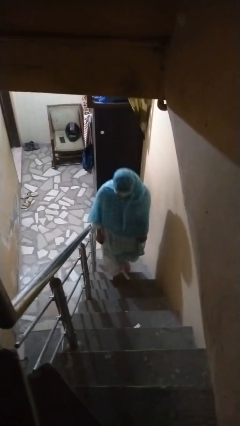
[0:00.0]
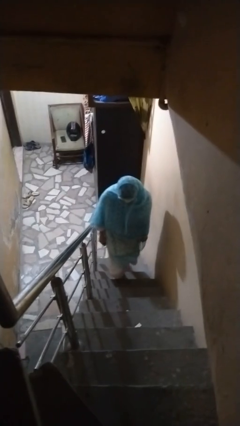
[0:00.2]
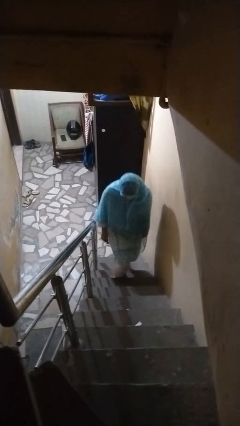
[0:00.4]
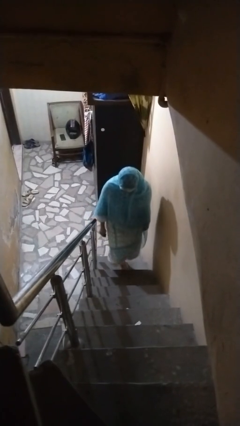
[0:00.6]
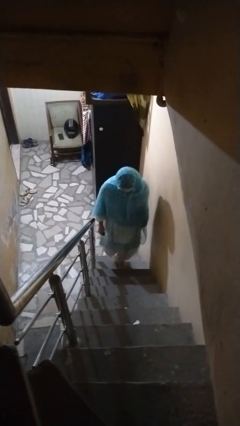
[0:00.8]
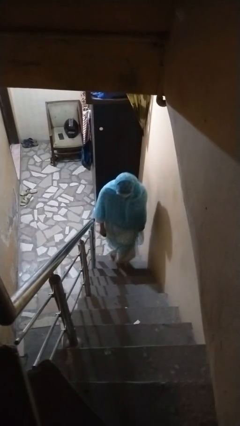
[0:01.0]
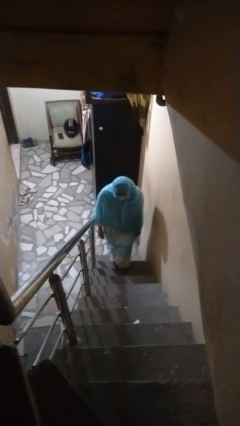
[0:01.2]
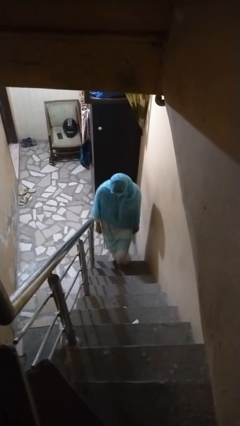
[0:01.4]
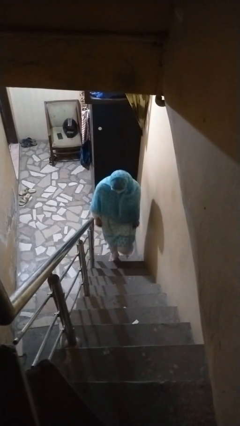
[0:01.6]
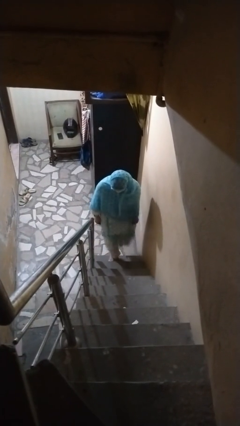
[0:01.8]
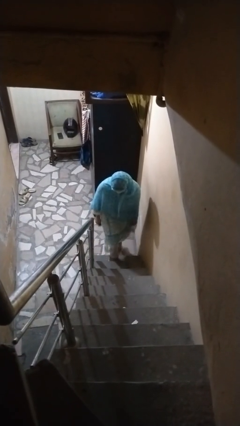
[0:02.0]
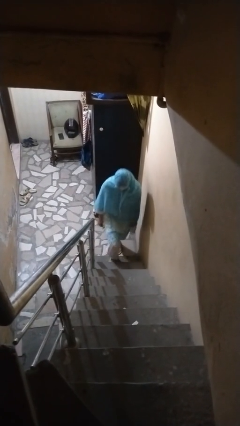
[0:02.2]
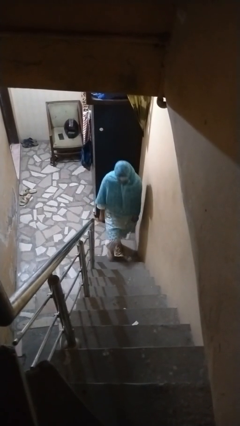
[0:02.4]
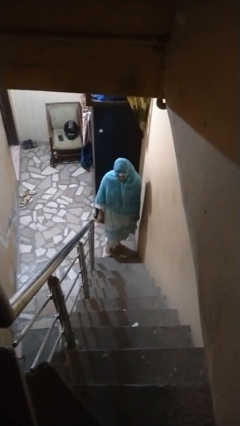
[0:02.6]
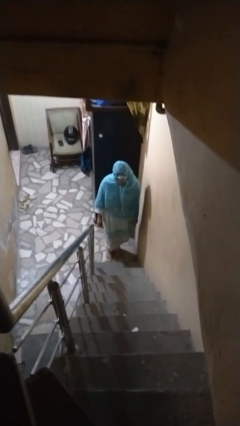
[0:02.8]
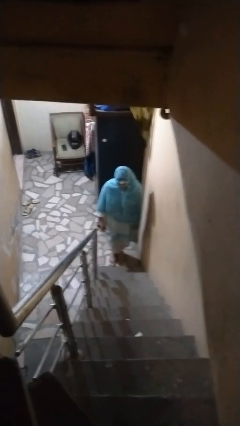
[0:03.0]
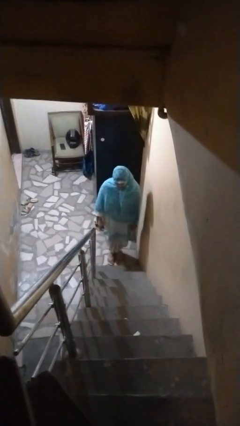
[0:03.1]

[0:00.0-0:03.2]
person climbs down stairs

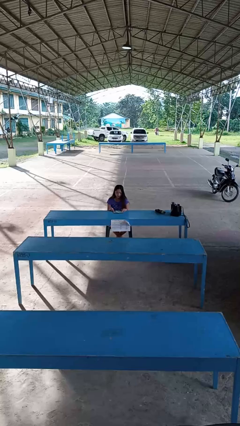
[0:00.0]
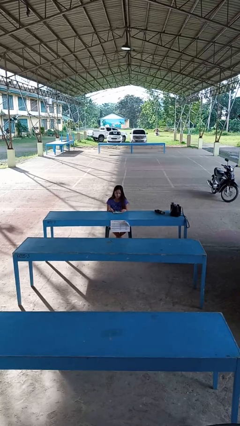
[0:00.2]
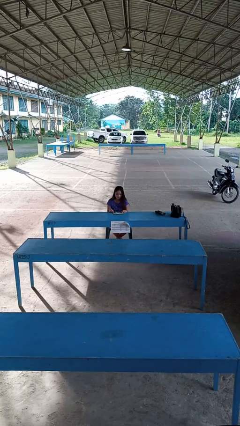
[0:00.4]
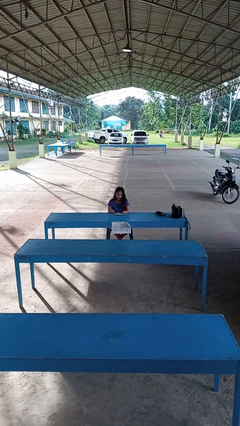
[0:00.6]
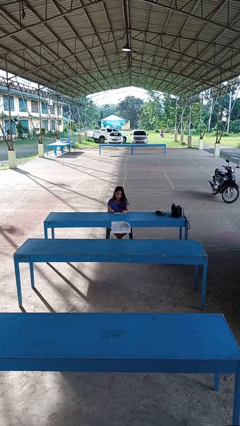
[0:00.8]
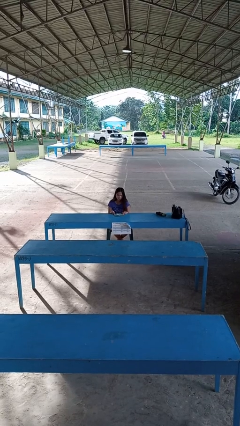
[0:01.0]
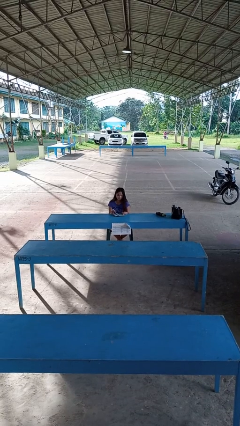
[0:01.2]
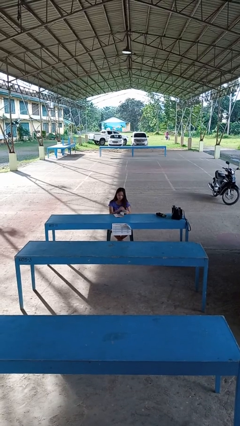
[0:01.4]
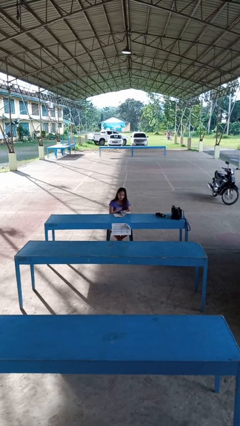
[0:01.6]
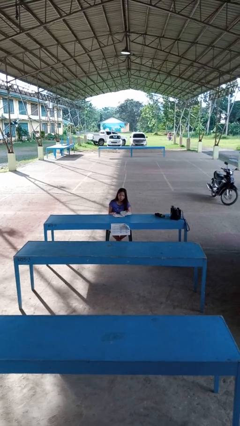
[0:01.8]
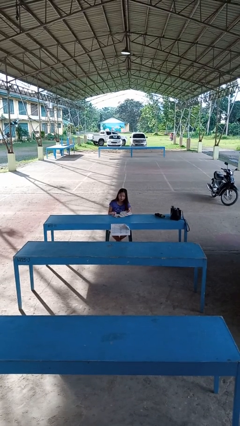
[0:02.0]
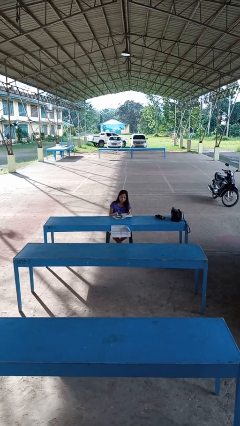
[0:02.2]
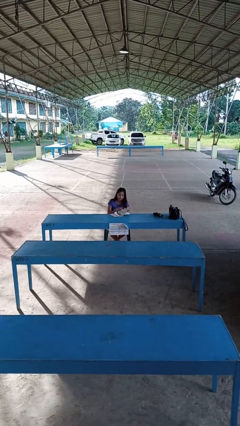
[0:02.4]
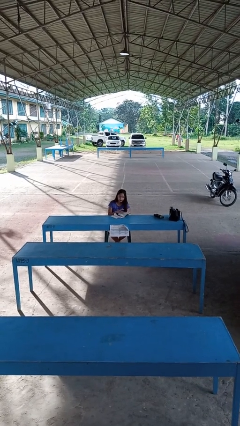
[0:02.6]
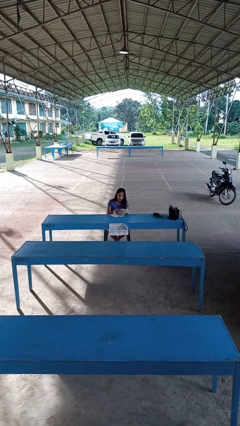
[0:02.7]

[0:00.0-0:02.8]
person reads magazine

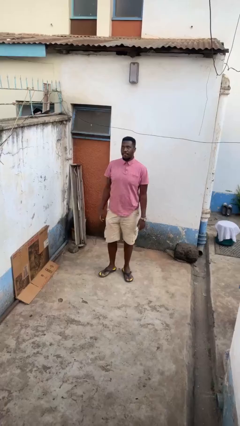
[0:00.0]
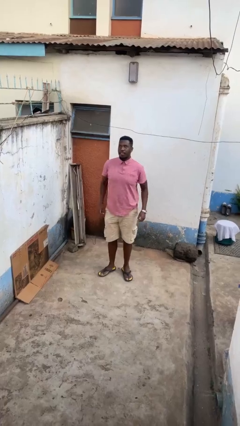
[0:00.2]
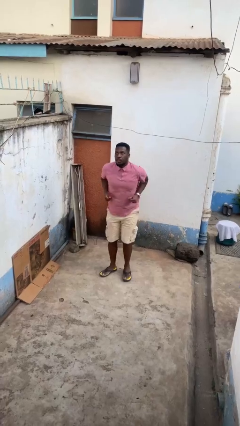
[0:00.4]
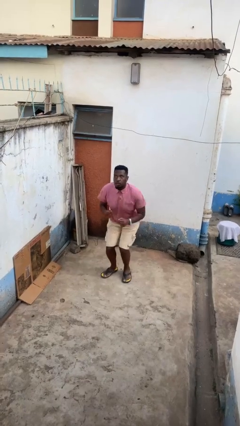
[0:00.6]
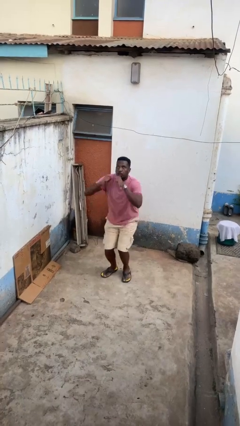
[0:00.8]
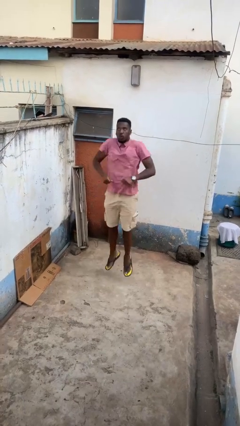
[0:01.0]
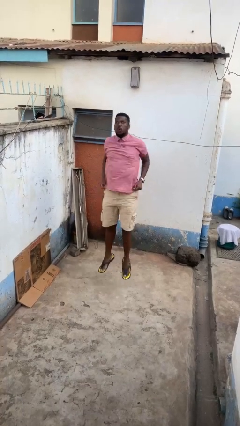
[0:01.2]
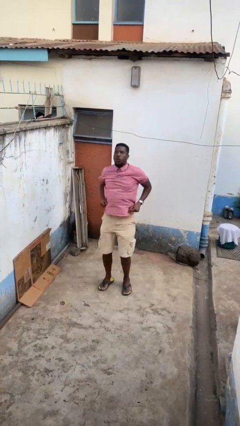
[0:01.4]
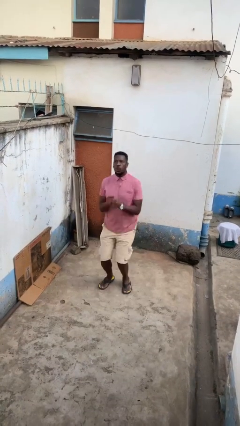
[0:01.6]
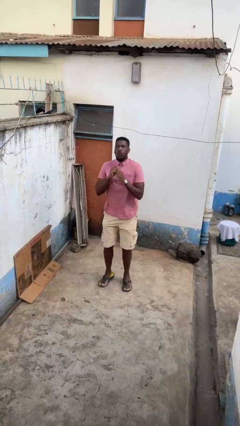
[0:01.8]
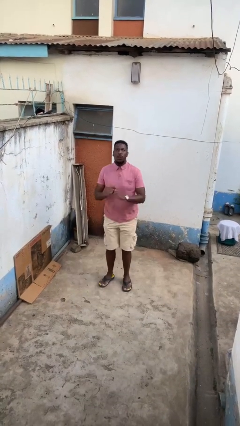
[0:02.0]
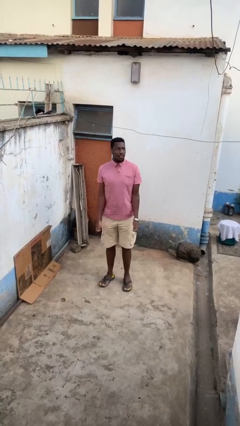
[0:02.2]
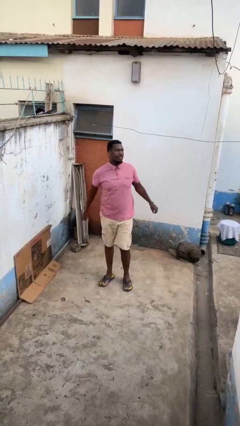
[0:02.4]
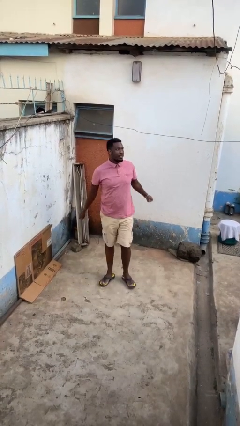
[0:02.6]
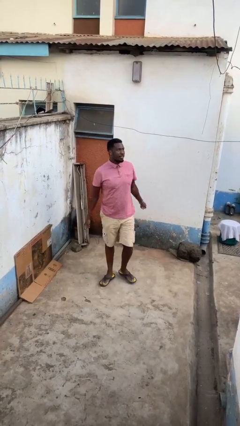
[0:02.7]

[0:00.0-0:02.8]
person jumps

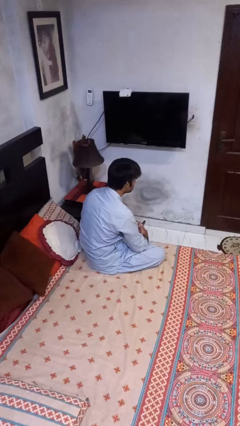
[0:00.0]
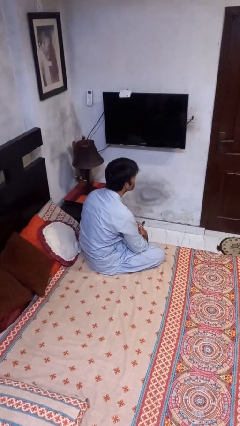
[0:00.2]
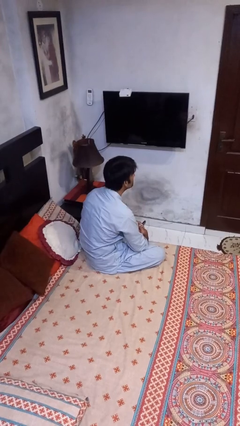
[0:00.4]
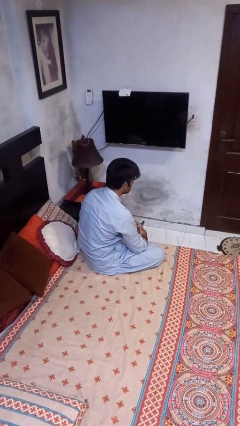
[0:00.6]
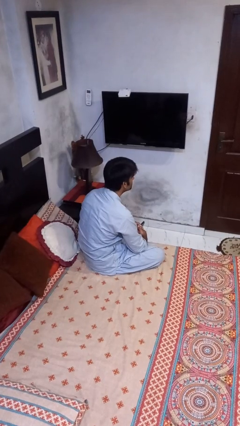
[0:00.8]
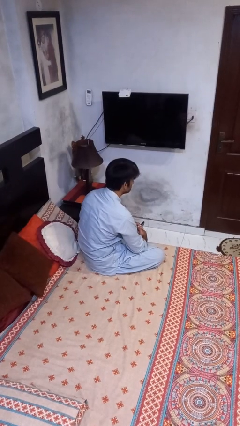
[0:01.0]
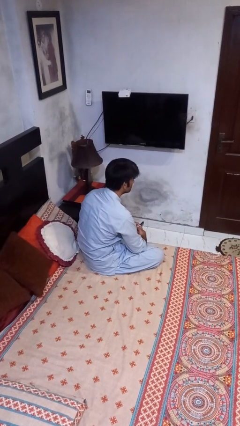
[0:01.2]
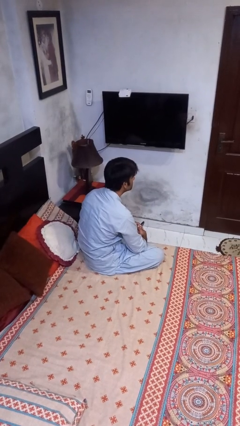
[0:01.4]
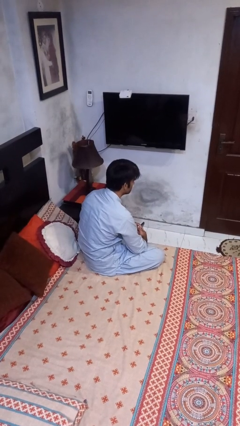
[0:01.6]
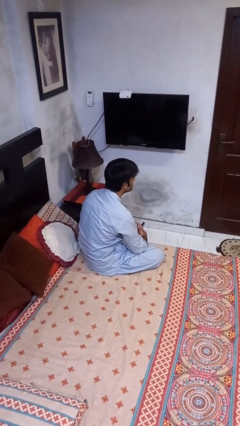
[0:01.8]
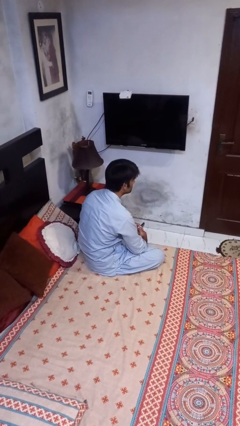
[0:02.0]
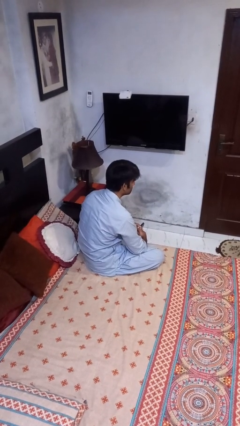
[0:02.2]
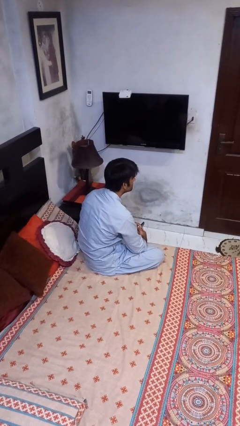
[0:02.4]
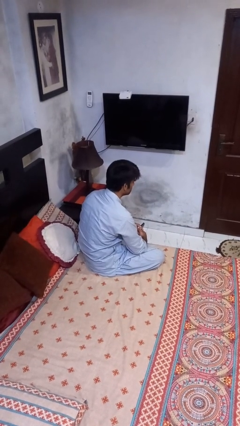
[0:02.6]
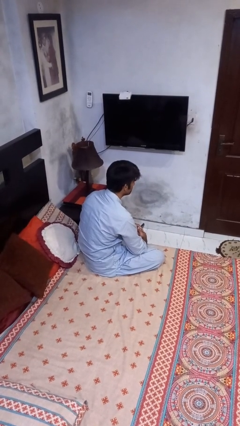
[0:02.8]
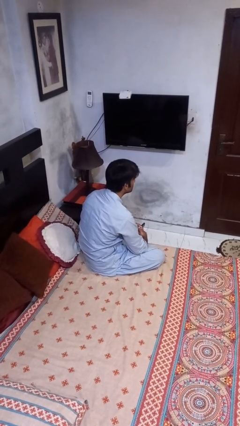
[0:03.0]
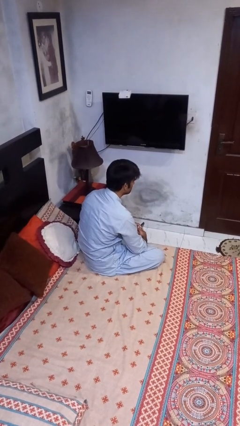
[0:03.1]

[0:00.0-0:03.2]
person nods head

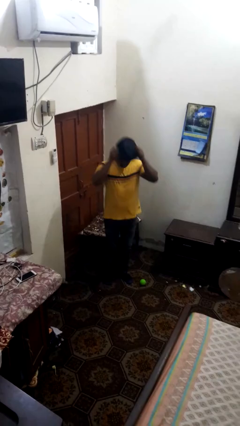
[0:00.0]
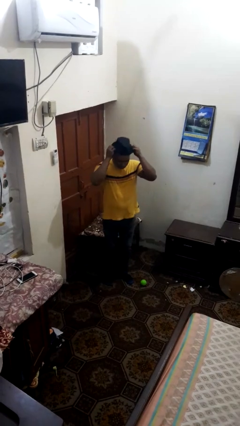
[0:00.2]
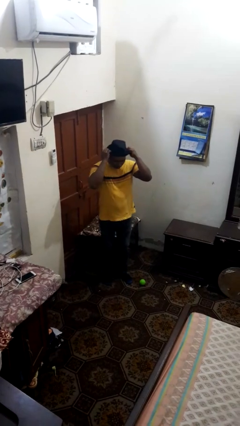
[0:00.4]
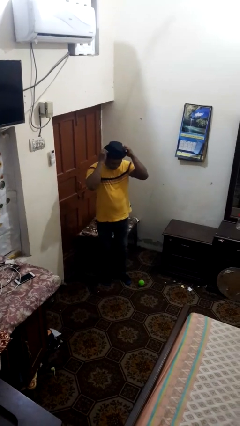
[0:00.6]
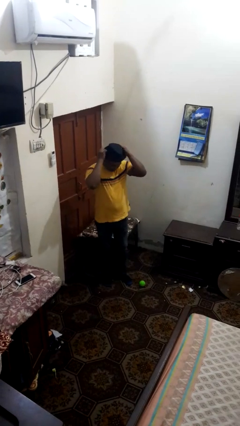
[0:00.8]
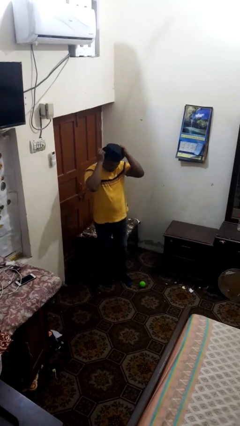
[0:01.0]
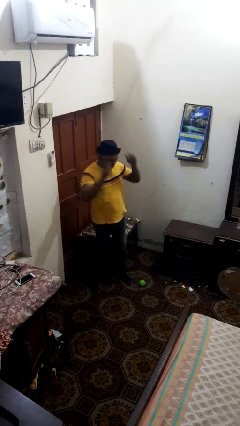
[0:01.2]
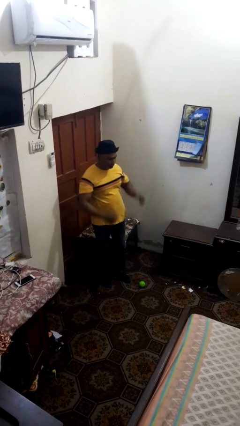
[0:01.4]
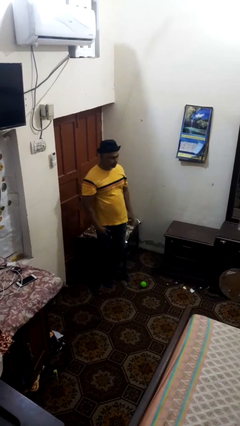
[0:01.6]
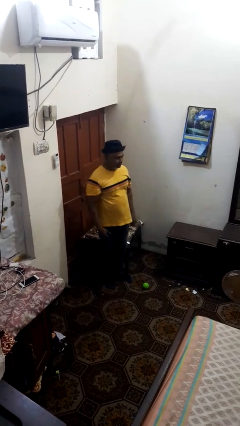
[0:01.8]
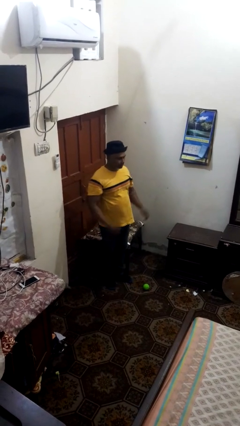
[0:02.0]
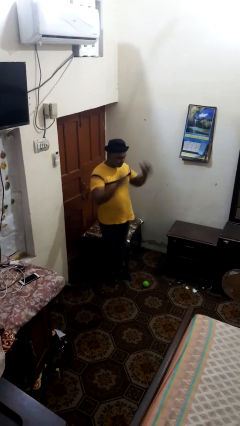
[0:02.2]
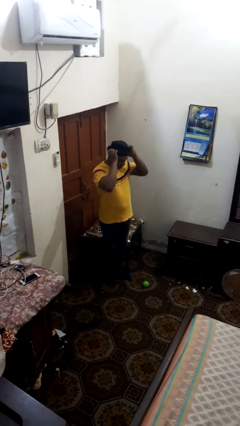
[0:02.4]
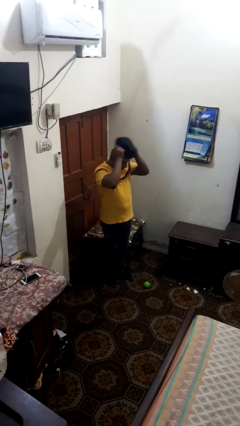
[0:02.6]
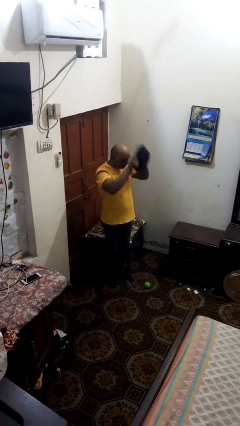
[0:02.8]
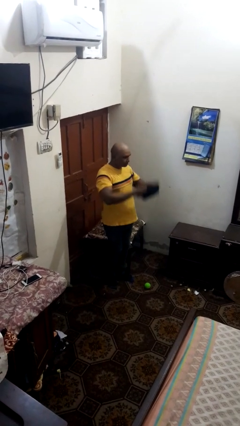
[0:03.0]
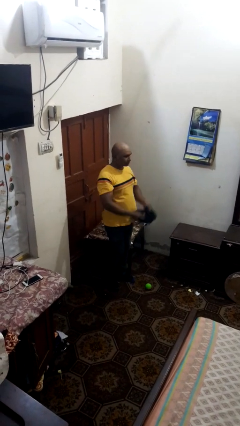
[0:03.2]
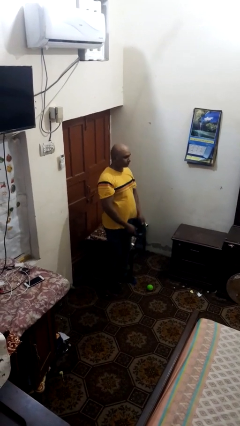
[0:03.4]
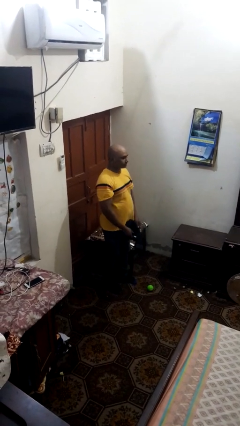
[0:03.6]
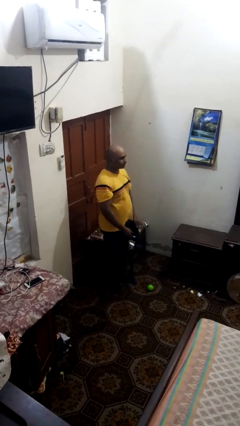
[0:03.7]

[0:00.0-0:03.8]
person puts on hat

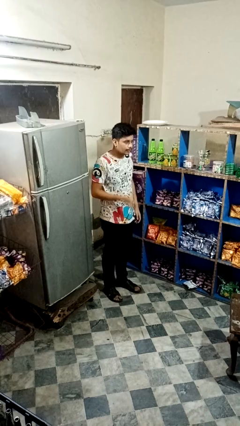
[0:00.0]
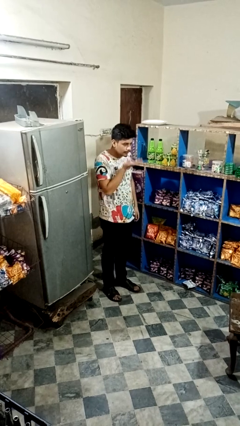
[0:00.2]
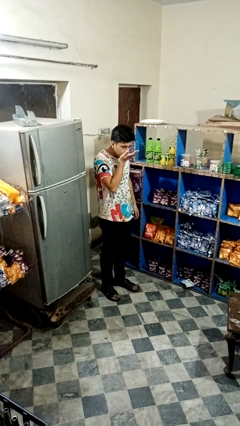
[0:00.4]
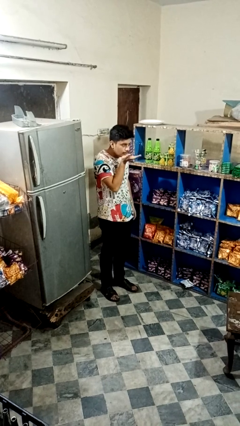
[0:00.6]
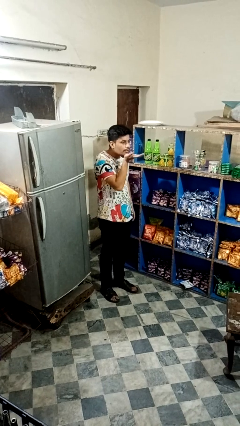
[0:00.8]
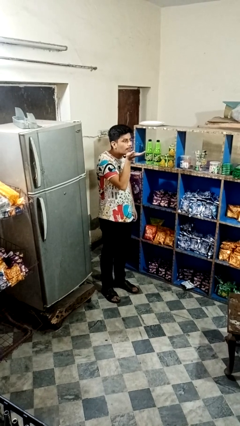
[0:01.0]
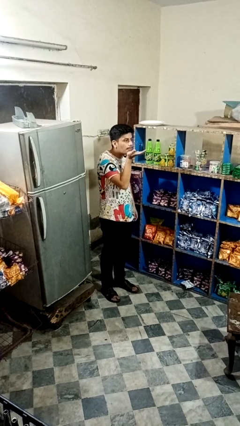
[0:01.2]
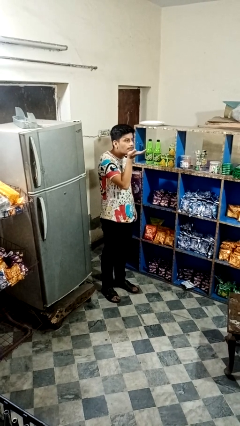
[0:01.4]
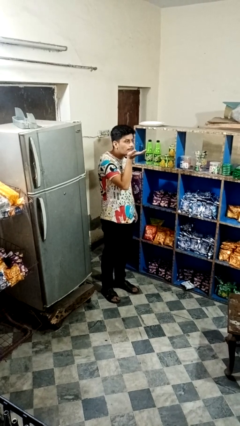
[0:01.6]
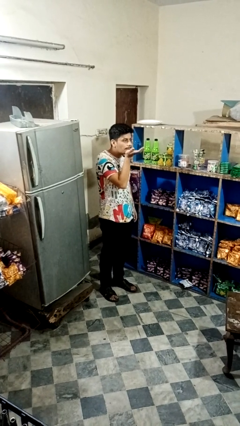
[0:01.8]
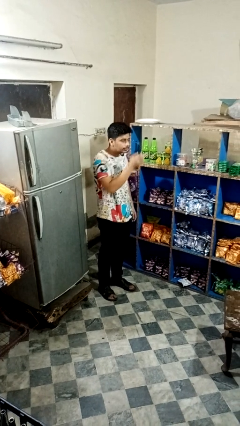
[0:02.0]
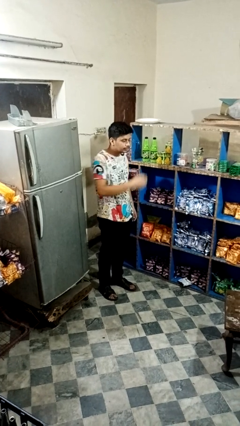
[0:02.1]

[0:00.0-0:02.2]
person gestures blow kiss
